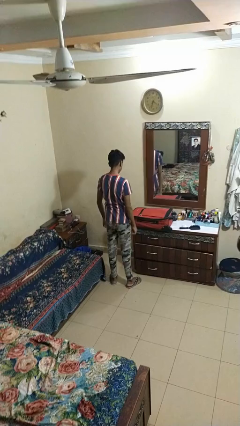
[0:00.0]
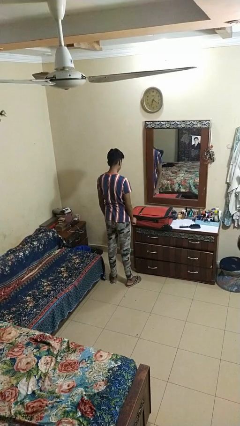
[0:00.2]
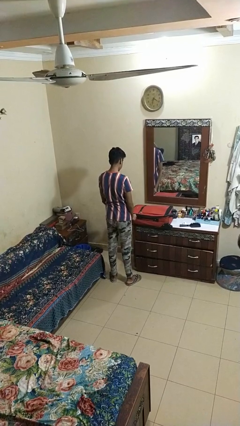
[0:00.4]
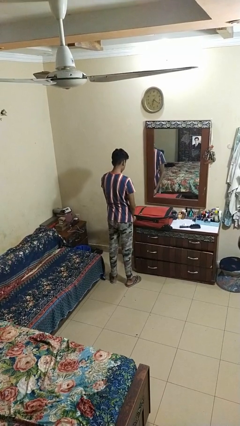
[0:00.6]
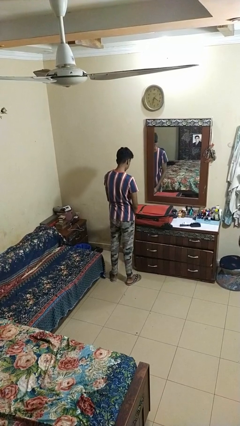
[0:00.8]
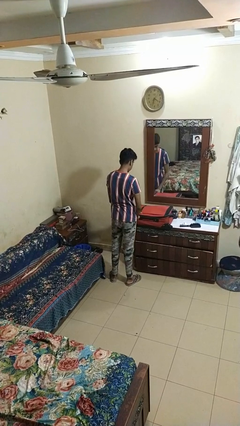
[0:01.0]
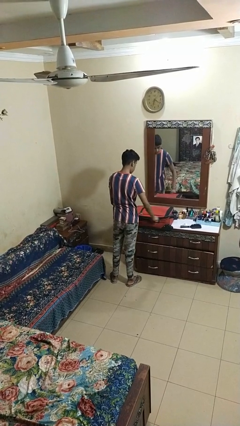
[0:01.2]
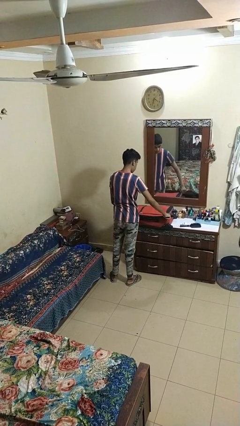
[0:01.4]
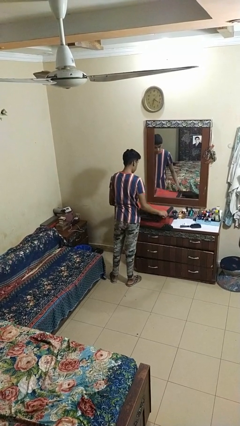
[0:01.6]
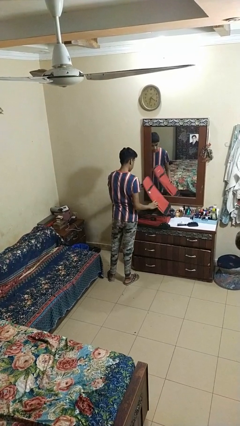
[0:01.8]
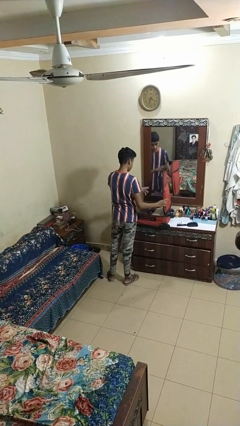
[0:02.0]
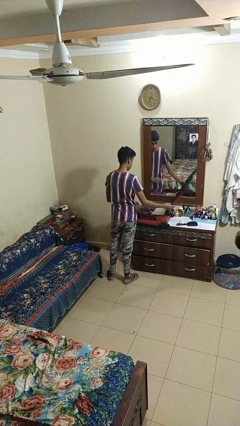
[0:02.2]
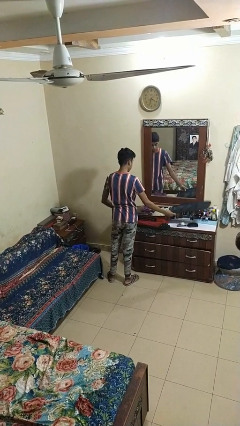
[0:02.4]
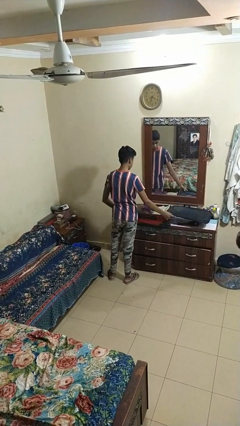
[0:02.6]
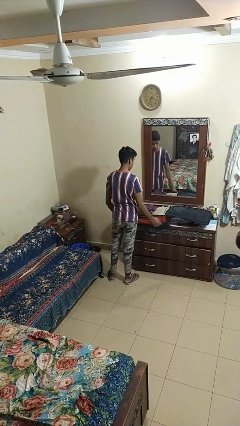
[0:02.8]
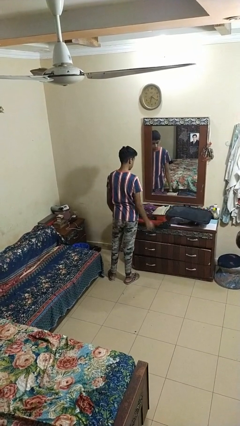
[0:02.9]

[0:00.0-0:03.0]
person opens suitcase

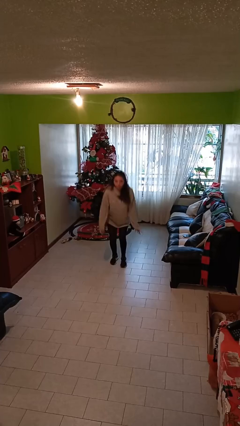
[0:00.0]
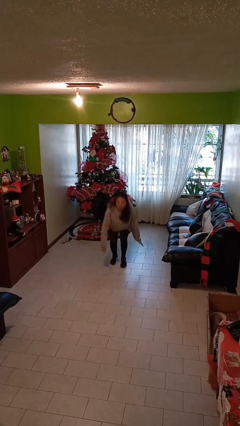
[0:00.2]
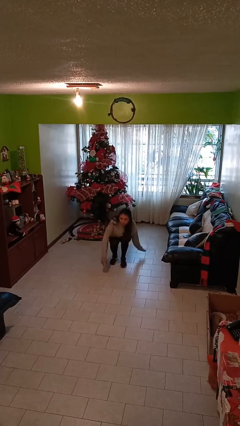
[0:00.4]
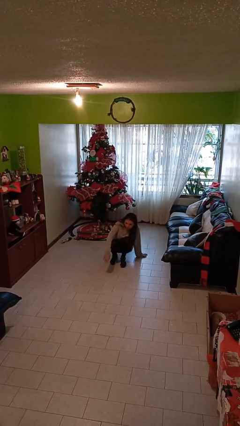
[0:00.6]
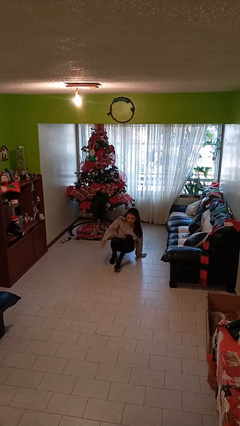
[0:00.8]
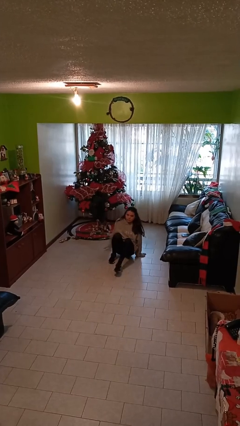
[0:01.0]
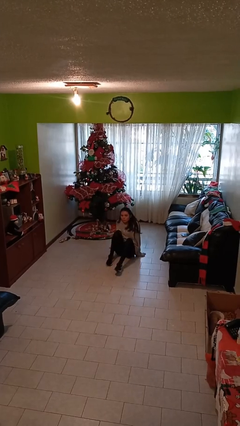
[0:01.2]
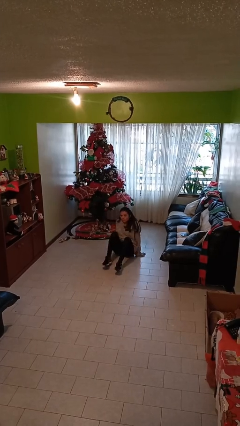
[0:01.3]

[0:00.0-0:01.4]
person sits down

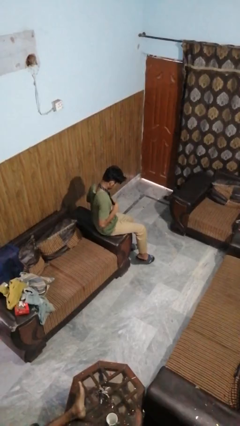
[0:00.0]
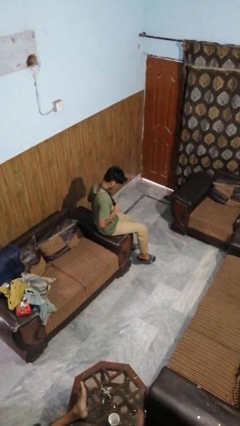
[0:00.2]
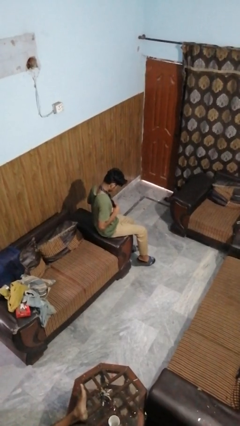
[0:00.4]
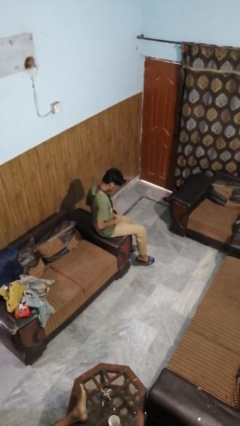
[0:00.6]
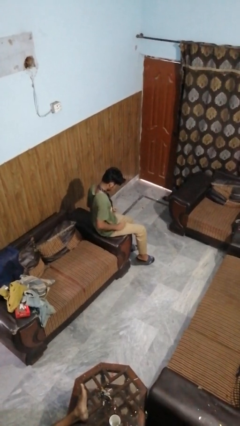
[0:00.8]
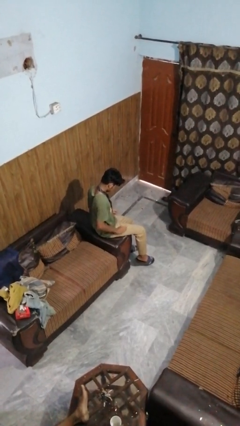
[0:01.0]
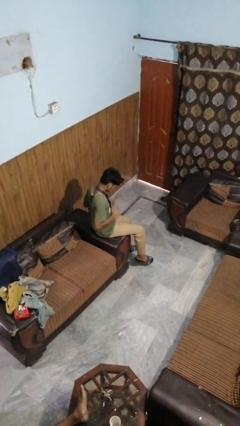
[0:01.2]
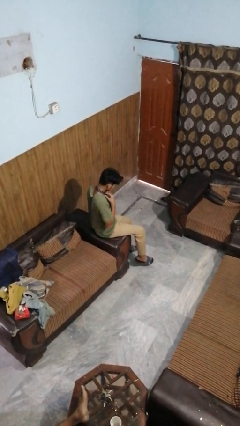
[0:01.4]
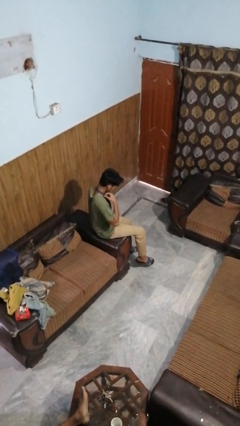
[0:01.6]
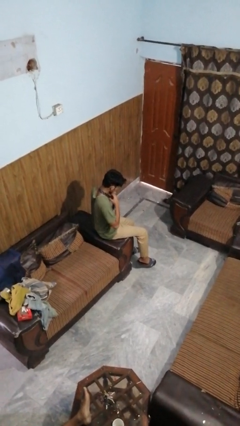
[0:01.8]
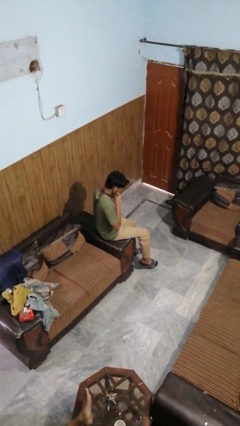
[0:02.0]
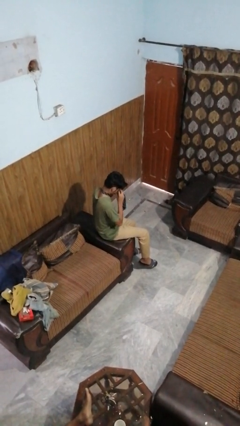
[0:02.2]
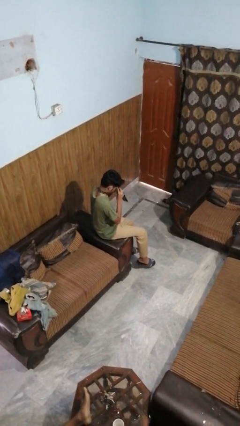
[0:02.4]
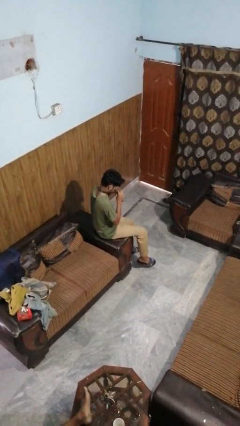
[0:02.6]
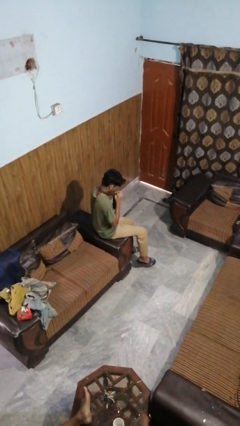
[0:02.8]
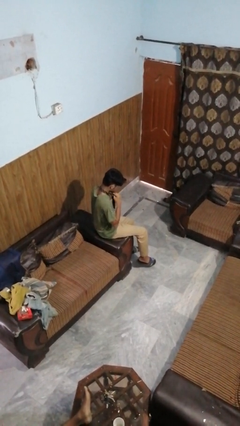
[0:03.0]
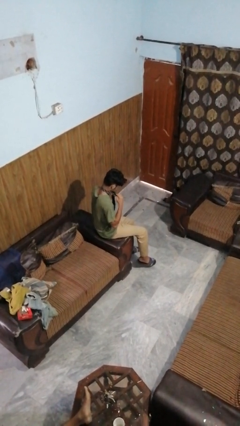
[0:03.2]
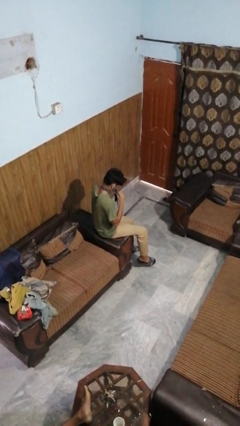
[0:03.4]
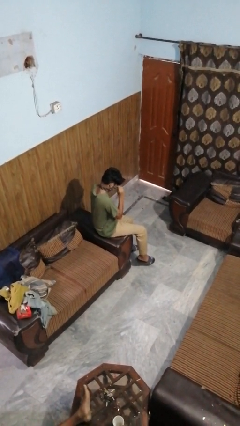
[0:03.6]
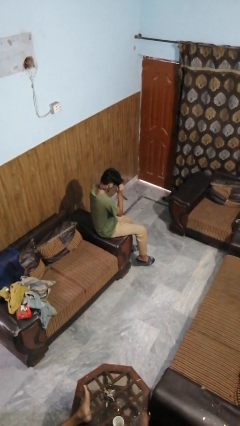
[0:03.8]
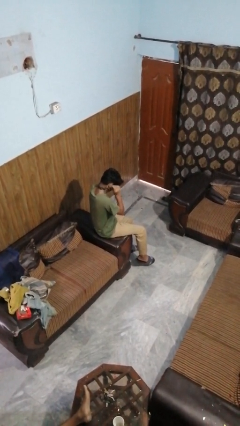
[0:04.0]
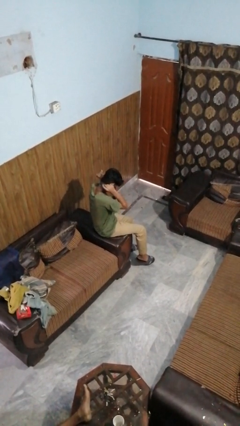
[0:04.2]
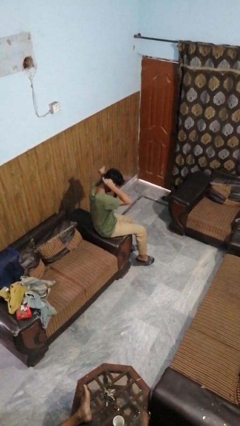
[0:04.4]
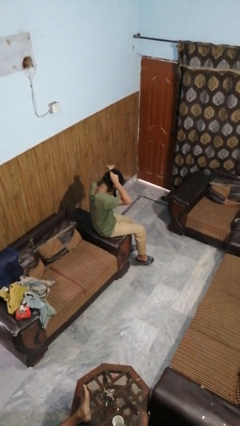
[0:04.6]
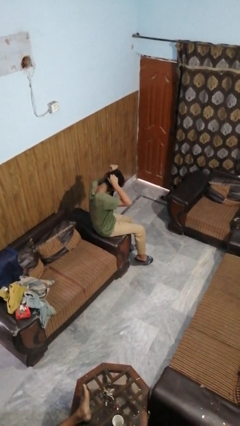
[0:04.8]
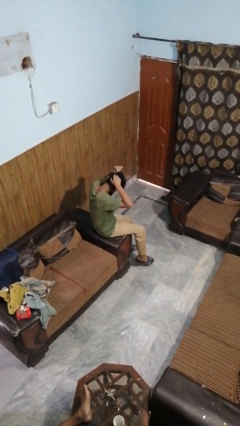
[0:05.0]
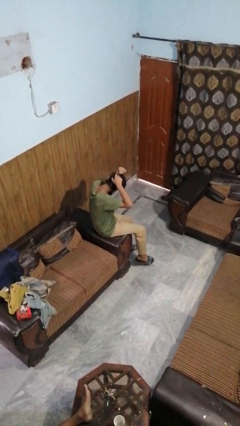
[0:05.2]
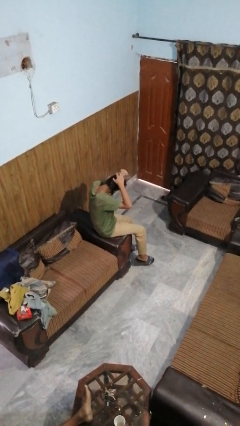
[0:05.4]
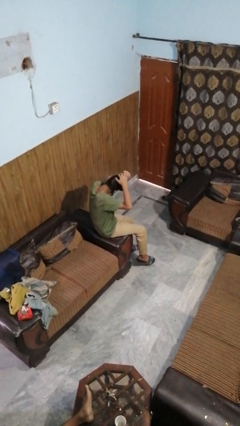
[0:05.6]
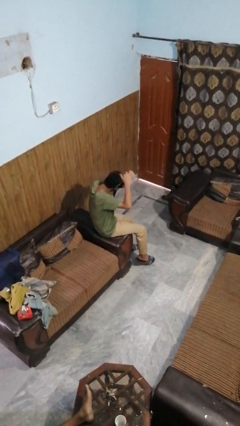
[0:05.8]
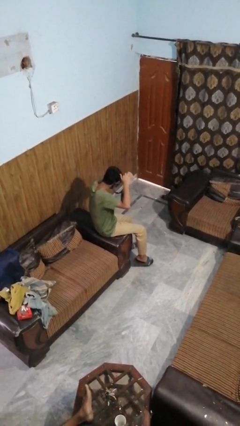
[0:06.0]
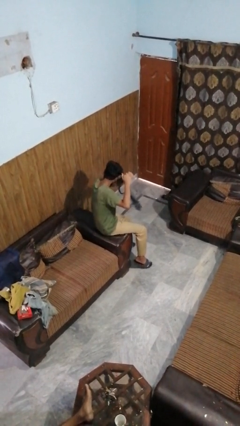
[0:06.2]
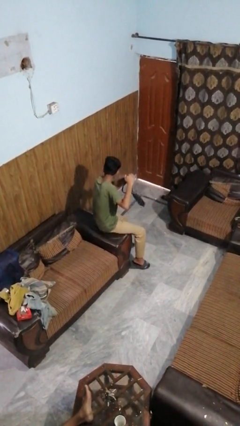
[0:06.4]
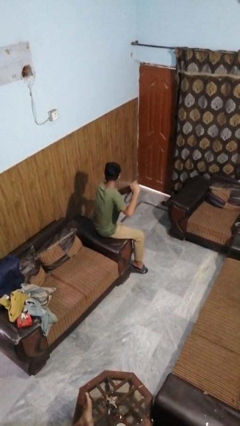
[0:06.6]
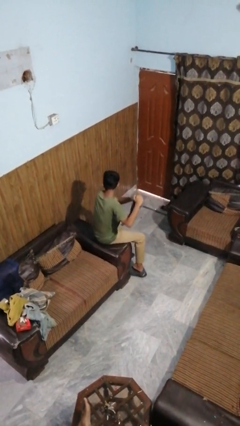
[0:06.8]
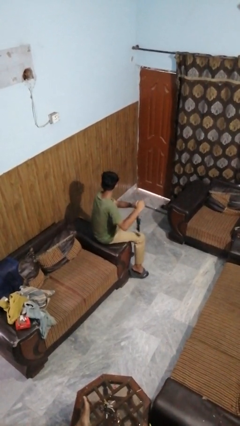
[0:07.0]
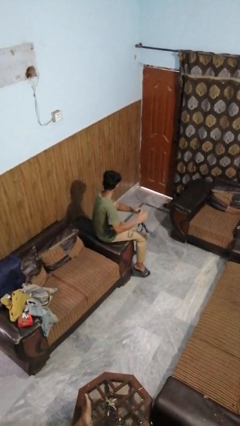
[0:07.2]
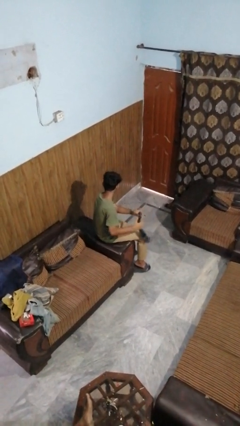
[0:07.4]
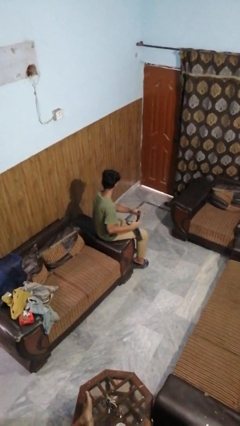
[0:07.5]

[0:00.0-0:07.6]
person takes off necktie

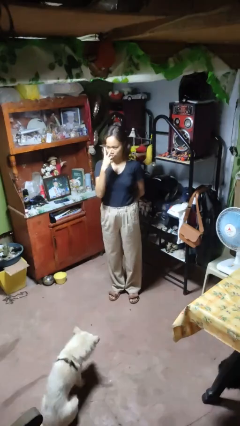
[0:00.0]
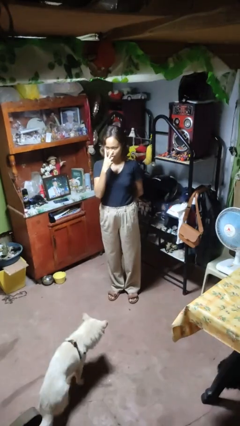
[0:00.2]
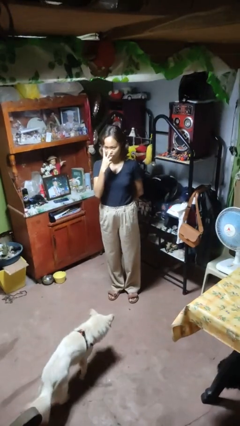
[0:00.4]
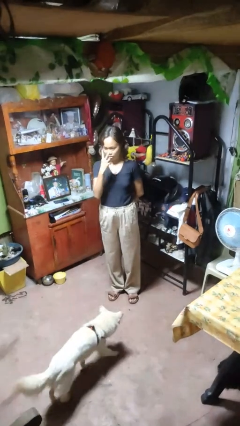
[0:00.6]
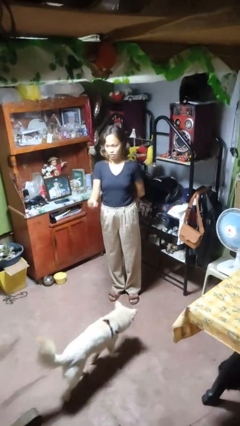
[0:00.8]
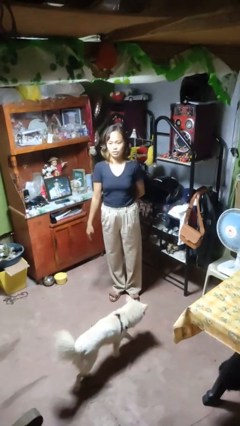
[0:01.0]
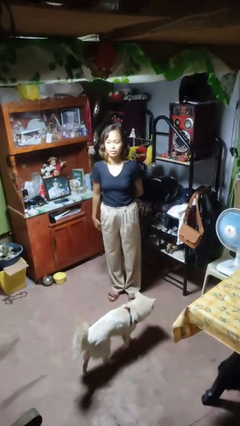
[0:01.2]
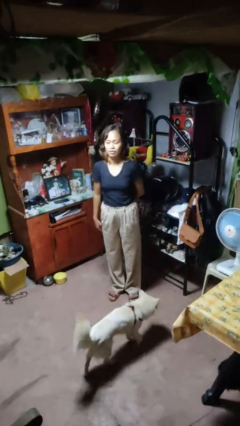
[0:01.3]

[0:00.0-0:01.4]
person gestures watch closely

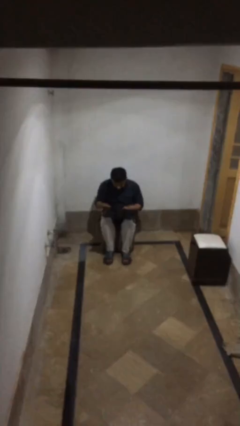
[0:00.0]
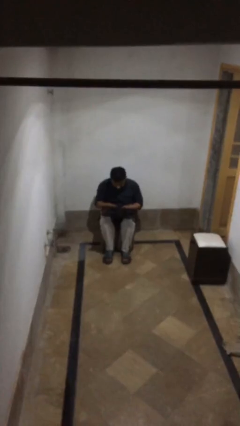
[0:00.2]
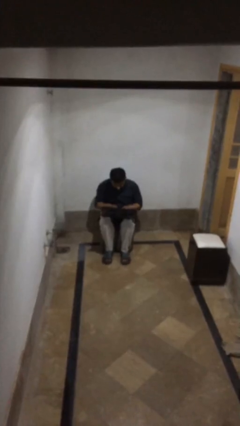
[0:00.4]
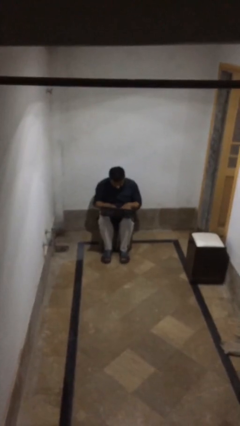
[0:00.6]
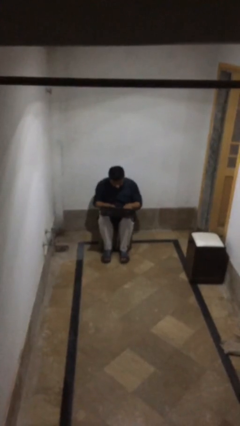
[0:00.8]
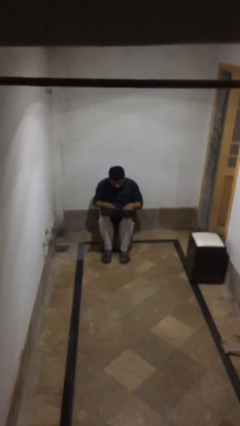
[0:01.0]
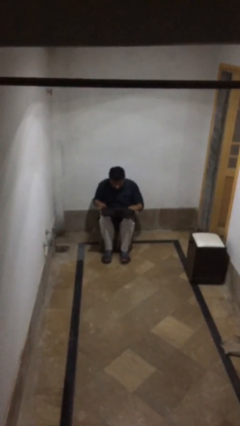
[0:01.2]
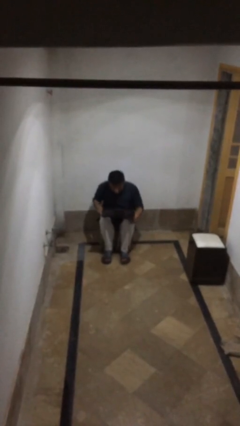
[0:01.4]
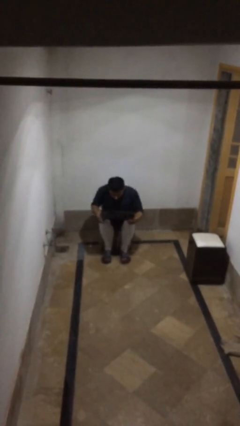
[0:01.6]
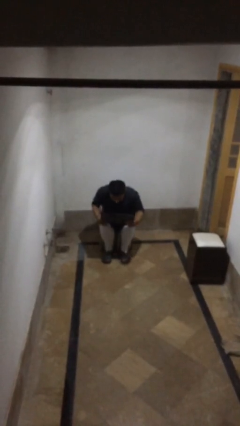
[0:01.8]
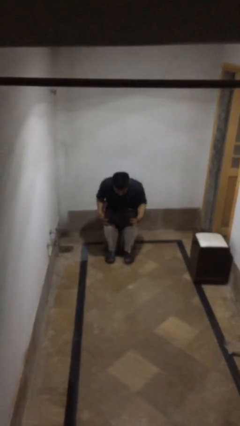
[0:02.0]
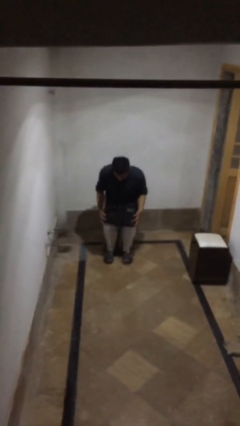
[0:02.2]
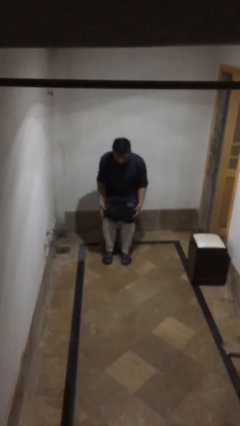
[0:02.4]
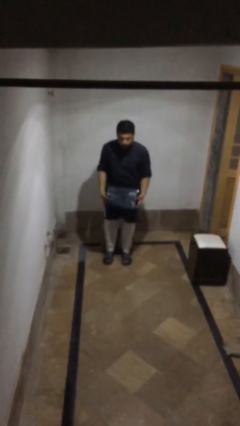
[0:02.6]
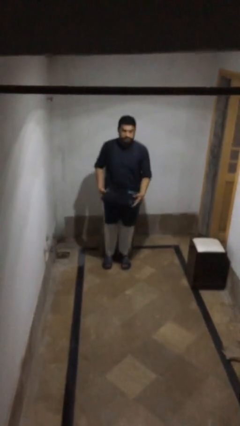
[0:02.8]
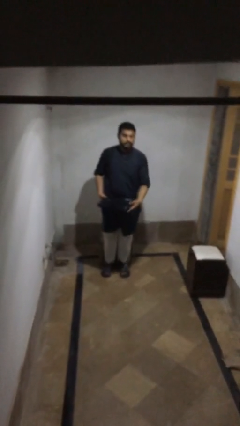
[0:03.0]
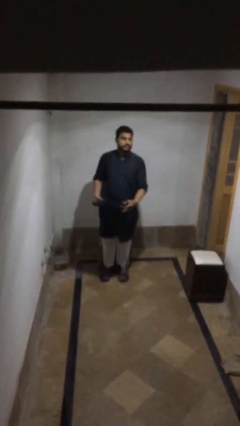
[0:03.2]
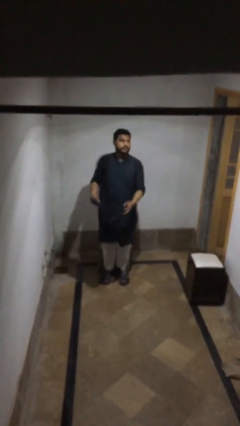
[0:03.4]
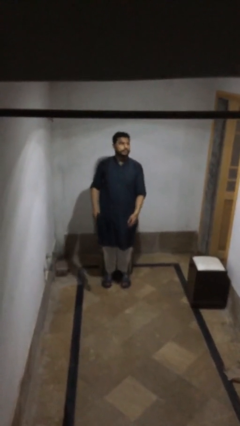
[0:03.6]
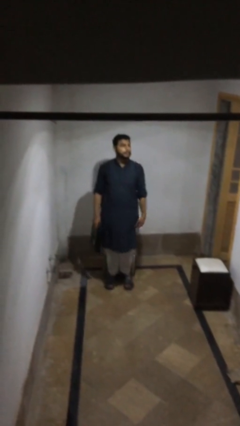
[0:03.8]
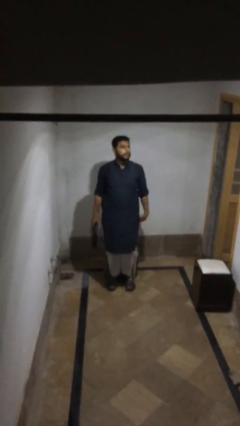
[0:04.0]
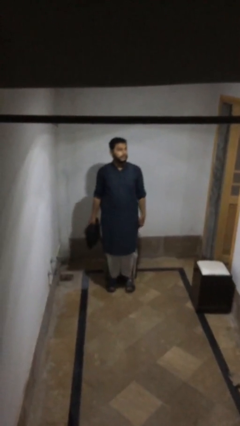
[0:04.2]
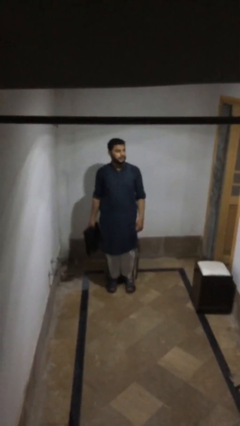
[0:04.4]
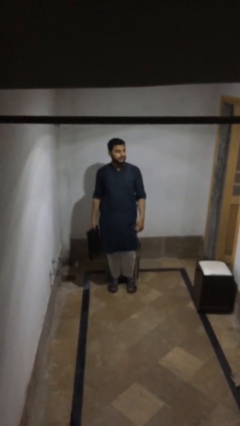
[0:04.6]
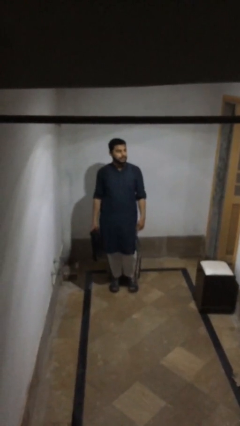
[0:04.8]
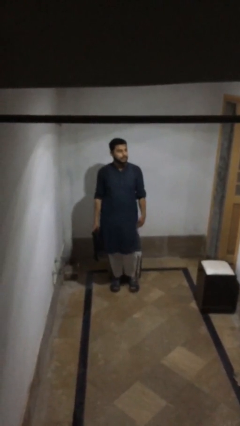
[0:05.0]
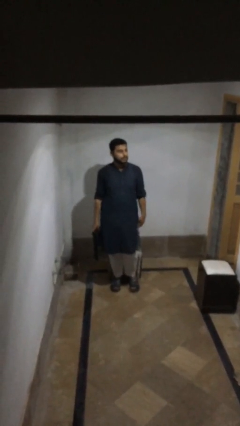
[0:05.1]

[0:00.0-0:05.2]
person stands up
